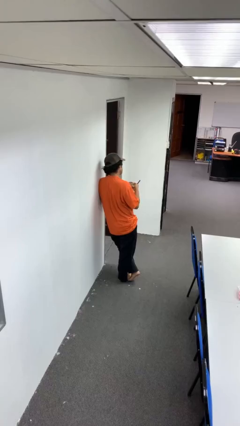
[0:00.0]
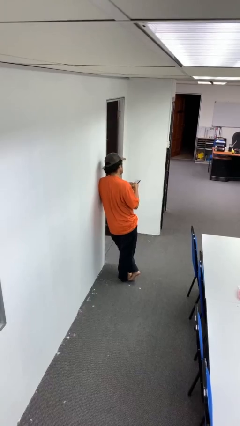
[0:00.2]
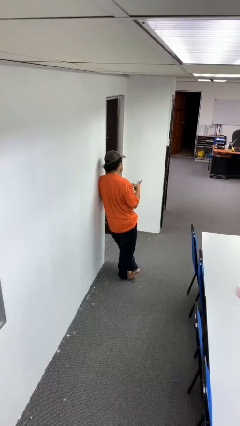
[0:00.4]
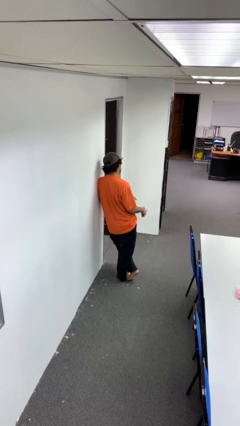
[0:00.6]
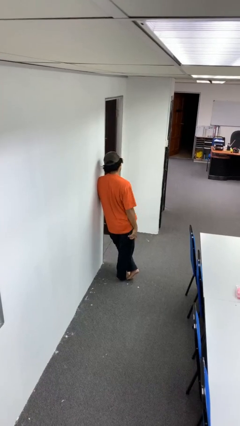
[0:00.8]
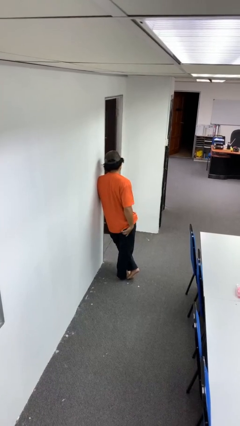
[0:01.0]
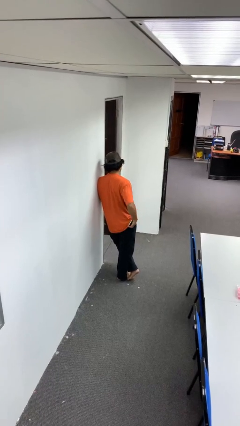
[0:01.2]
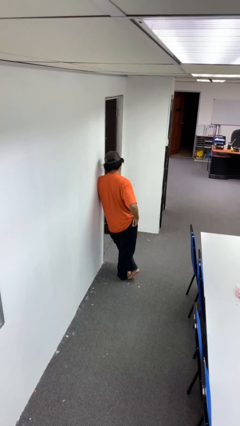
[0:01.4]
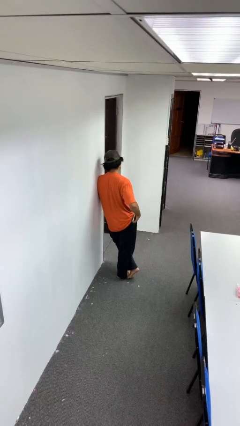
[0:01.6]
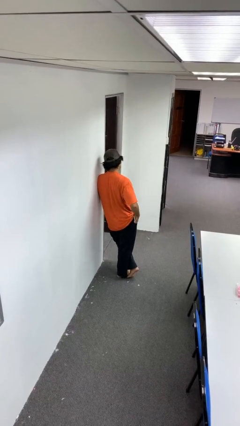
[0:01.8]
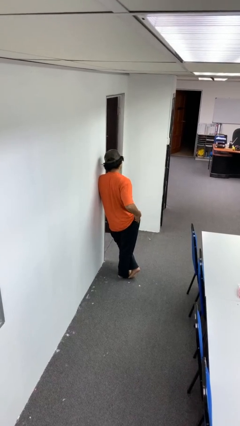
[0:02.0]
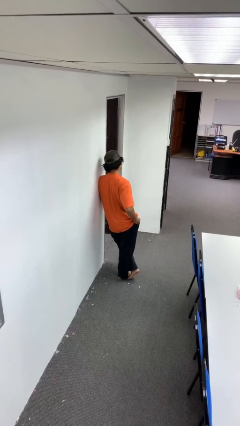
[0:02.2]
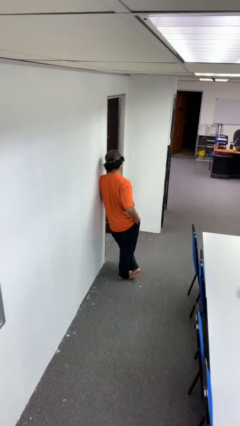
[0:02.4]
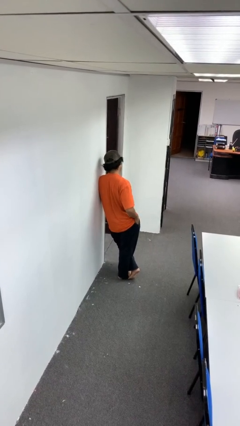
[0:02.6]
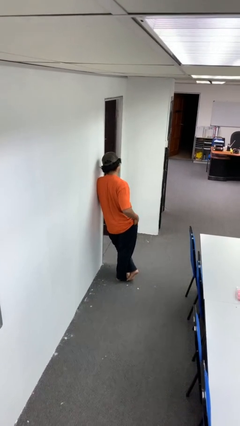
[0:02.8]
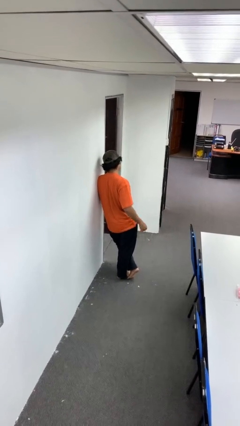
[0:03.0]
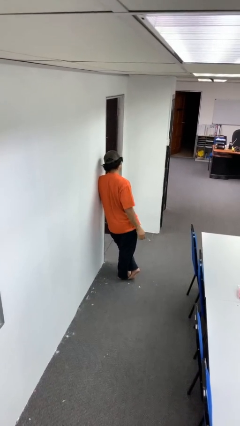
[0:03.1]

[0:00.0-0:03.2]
person puts phone into pocket

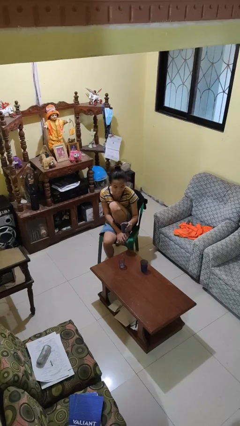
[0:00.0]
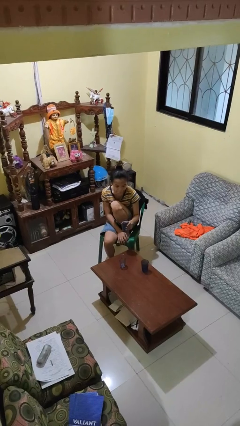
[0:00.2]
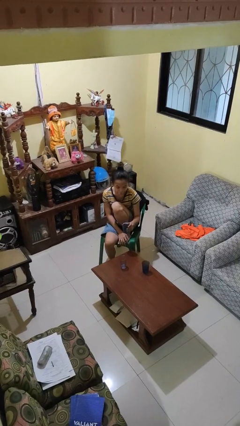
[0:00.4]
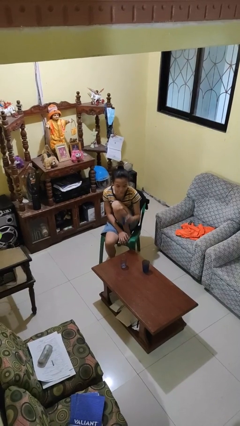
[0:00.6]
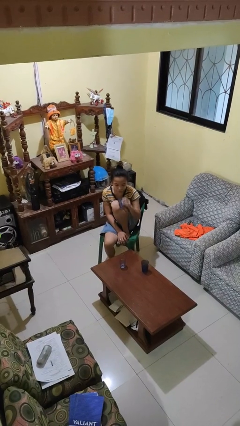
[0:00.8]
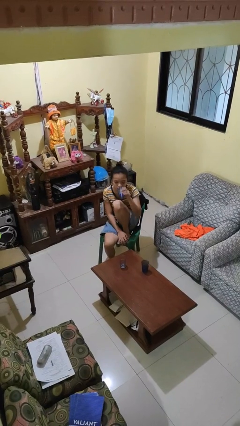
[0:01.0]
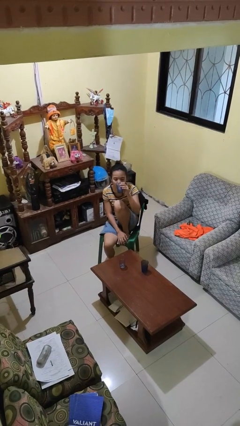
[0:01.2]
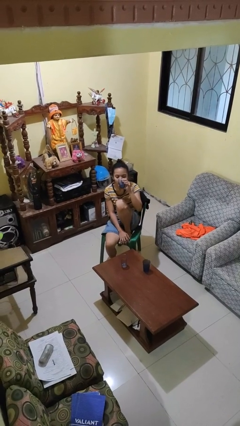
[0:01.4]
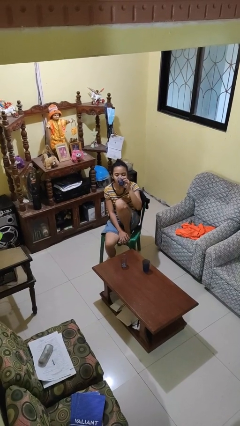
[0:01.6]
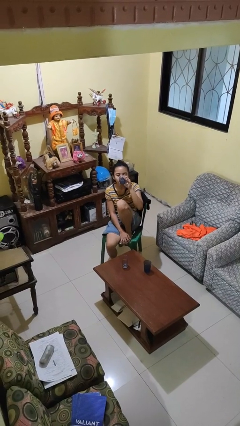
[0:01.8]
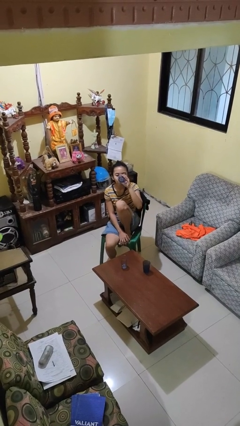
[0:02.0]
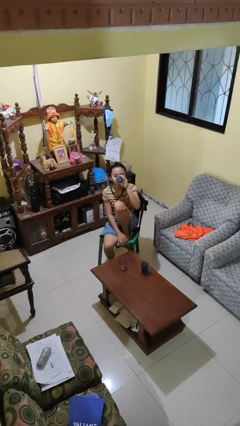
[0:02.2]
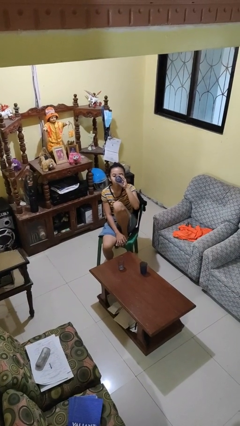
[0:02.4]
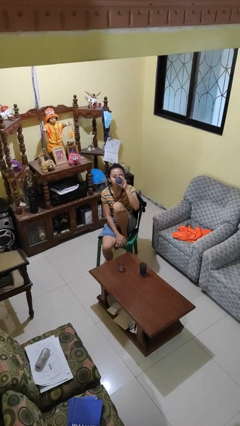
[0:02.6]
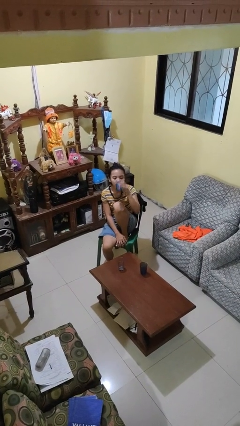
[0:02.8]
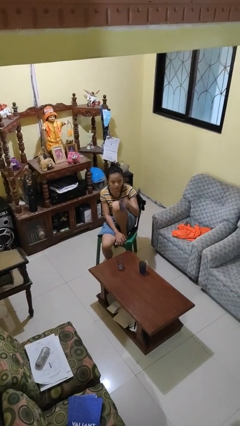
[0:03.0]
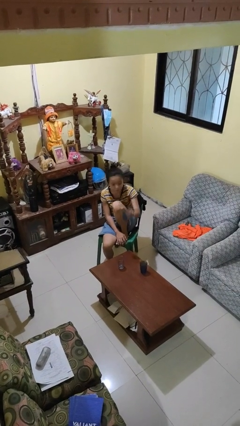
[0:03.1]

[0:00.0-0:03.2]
person drinks from shotglass

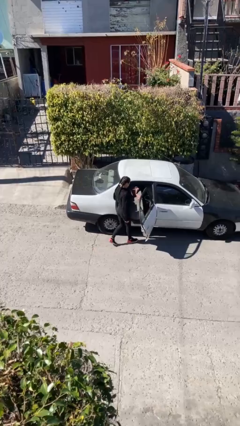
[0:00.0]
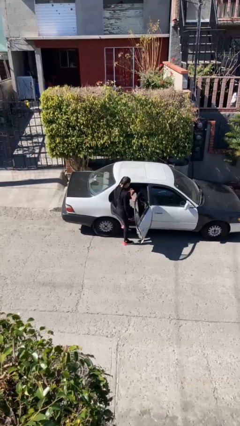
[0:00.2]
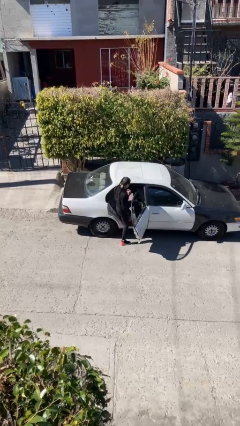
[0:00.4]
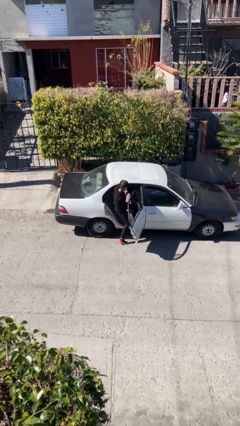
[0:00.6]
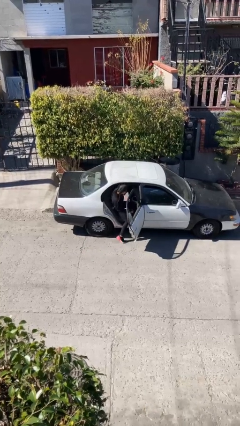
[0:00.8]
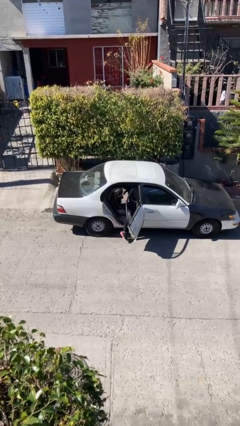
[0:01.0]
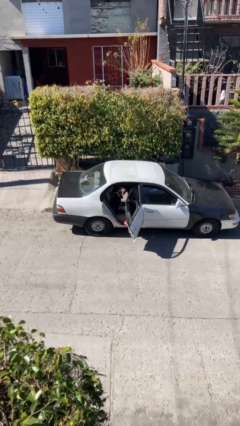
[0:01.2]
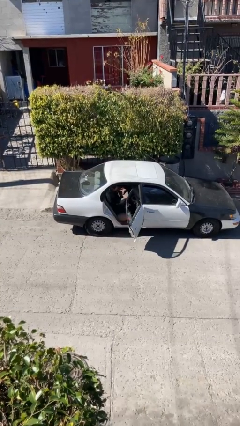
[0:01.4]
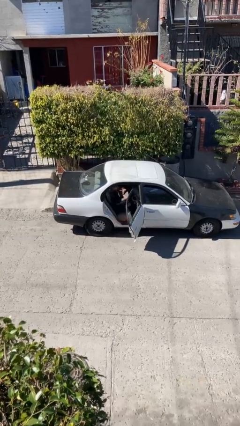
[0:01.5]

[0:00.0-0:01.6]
person enters car

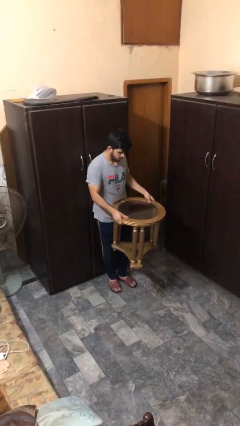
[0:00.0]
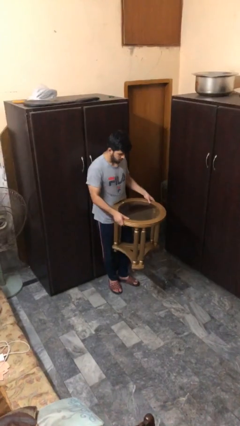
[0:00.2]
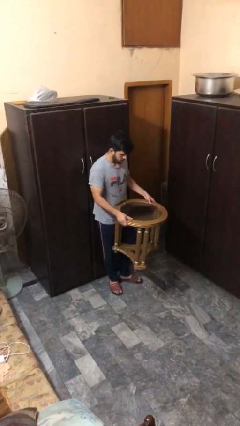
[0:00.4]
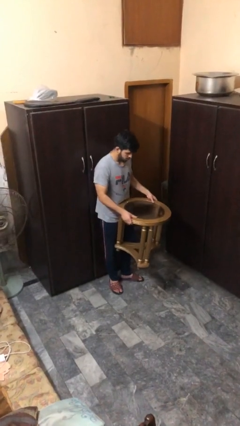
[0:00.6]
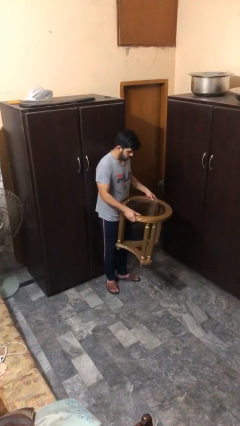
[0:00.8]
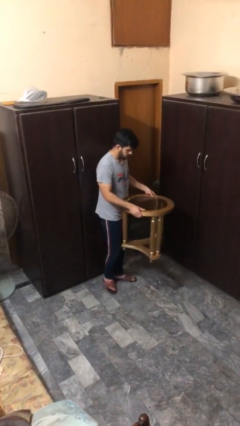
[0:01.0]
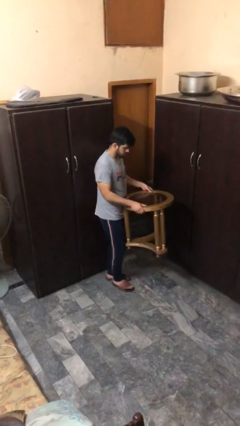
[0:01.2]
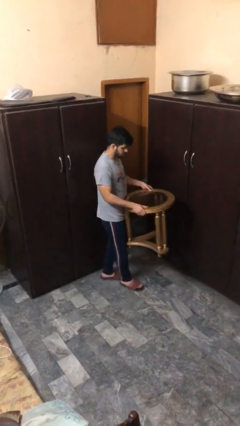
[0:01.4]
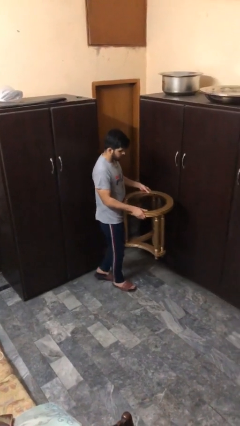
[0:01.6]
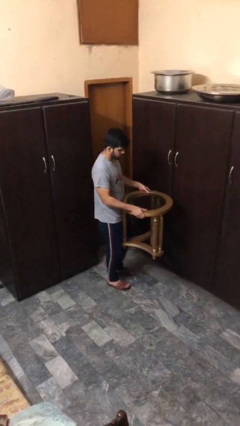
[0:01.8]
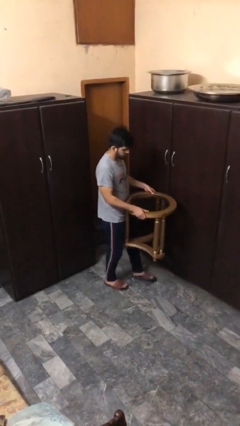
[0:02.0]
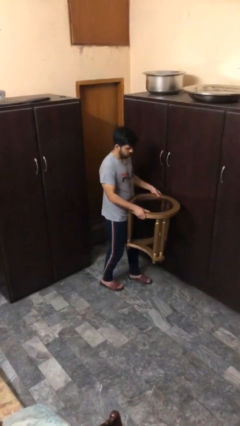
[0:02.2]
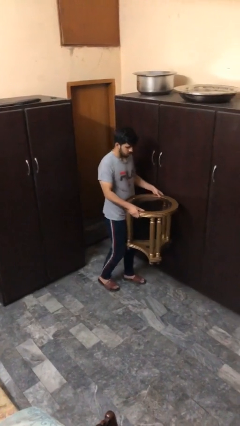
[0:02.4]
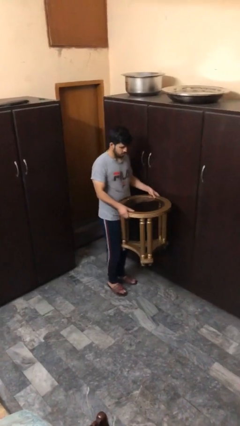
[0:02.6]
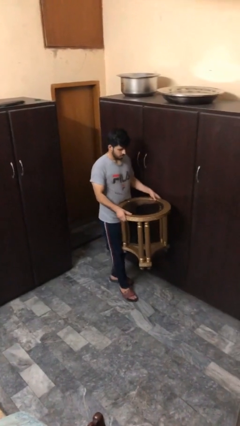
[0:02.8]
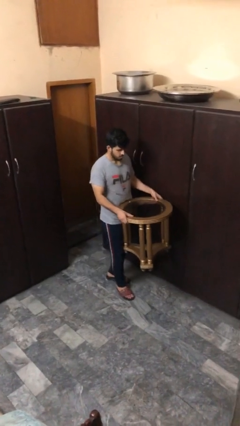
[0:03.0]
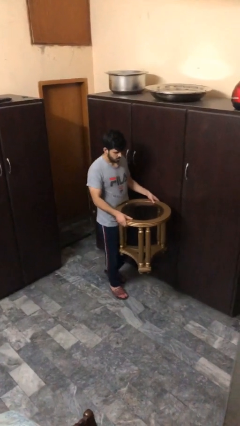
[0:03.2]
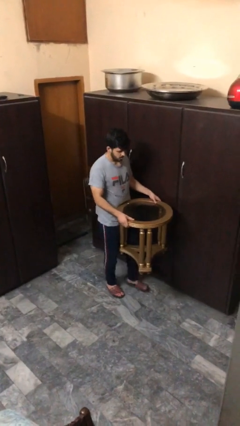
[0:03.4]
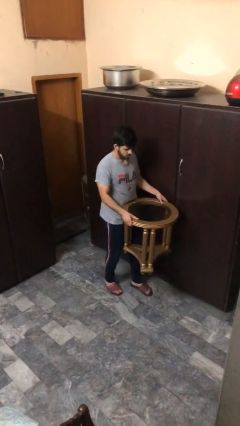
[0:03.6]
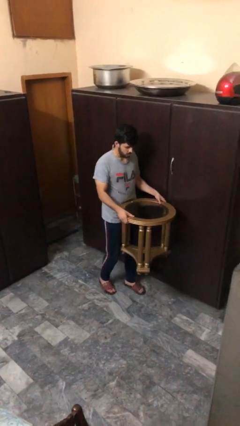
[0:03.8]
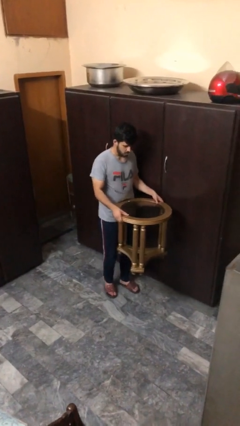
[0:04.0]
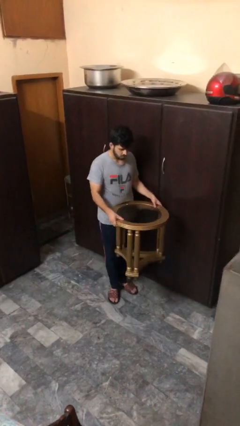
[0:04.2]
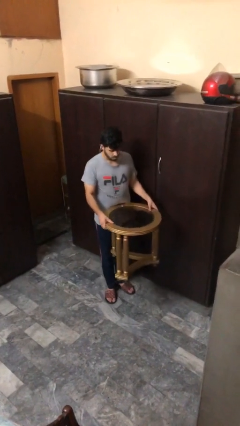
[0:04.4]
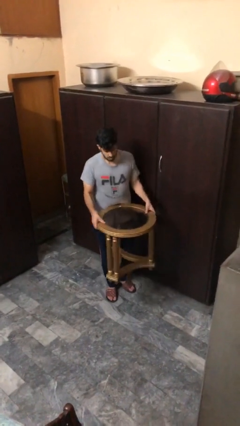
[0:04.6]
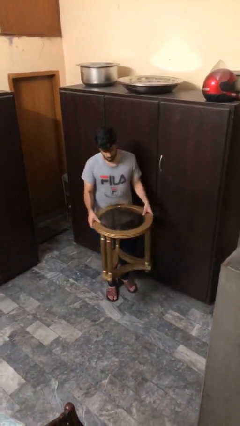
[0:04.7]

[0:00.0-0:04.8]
person carries furniture

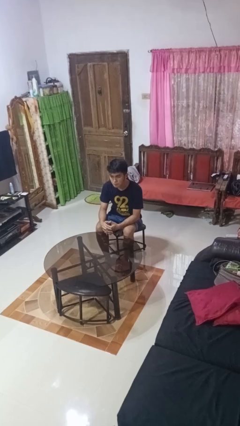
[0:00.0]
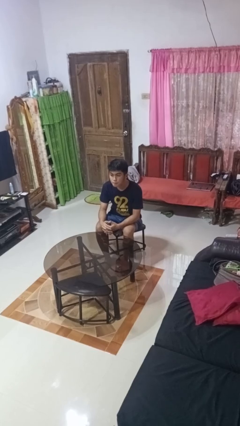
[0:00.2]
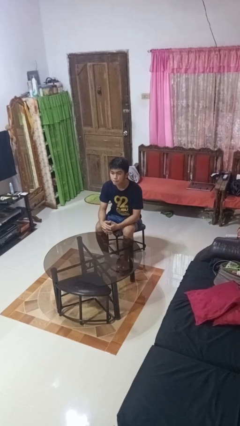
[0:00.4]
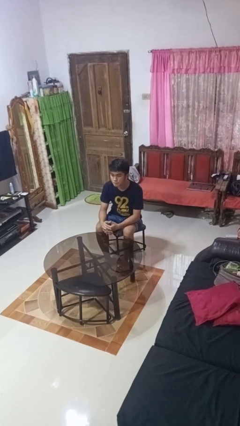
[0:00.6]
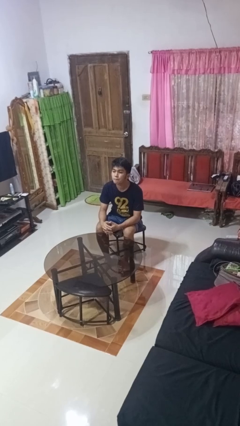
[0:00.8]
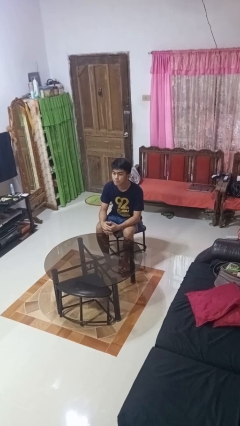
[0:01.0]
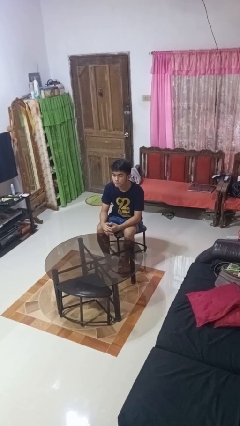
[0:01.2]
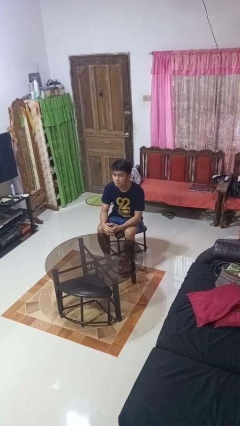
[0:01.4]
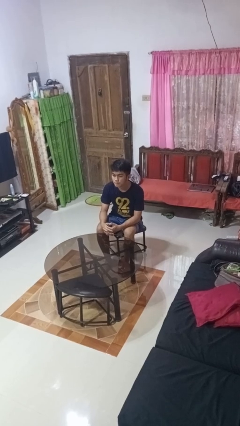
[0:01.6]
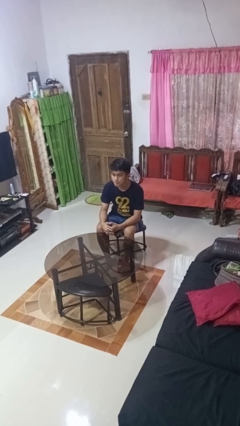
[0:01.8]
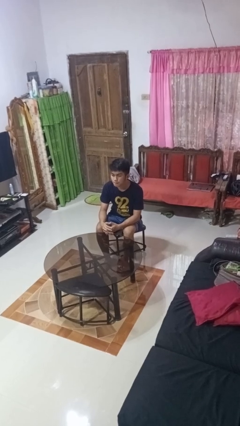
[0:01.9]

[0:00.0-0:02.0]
person nods head

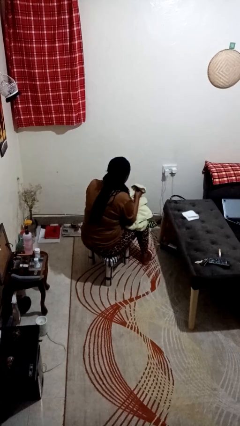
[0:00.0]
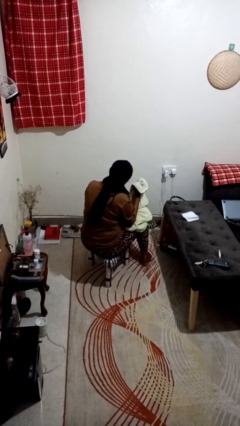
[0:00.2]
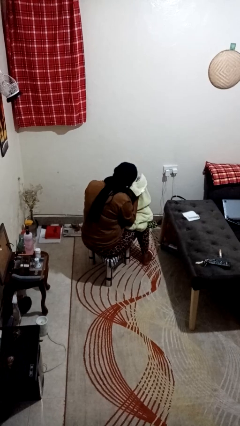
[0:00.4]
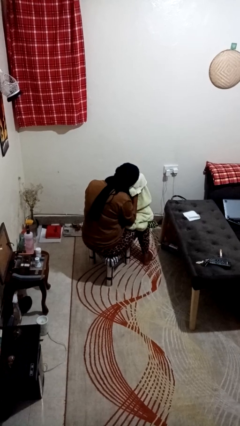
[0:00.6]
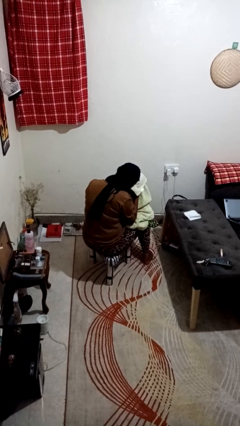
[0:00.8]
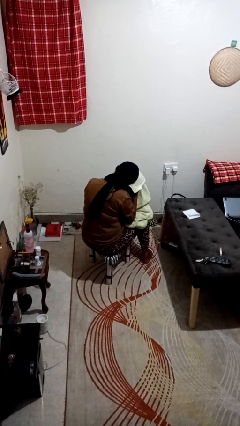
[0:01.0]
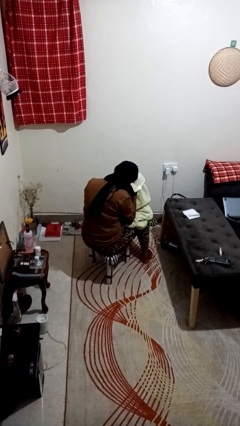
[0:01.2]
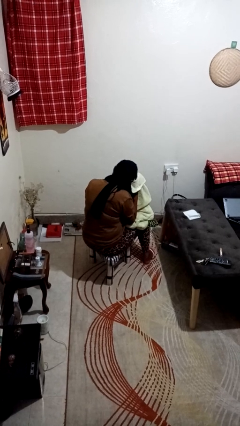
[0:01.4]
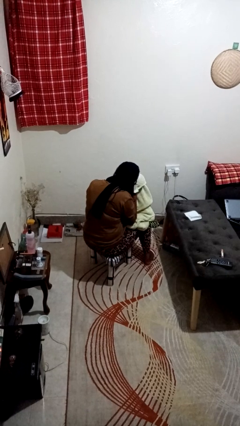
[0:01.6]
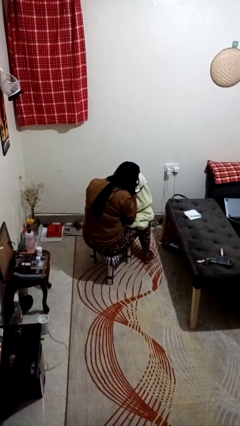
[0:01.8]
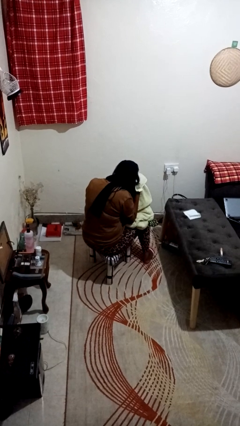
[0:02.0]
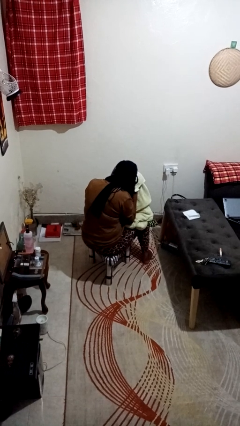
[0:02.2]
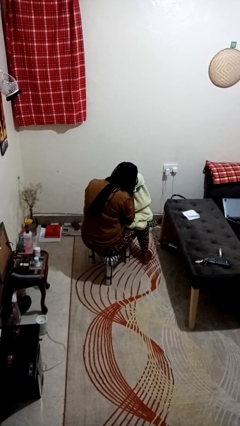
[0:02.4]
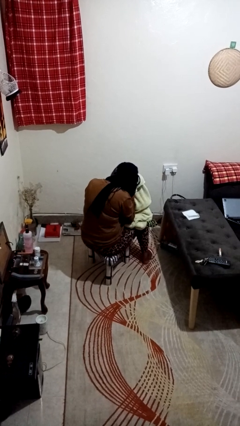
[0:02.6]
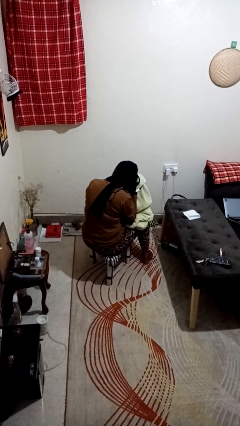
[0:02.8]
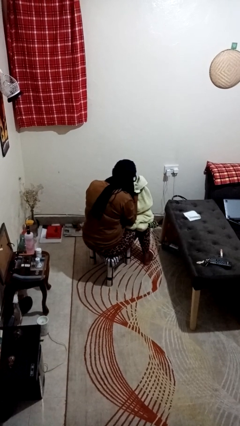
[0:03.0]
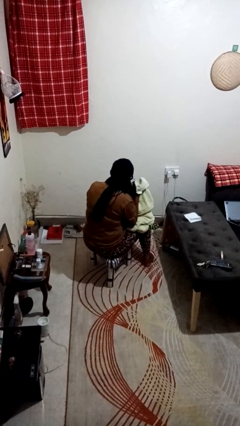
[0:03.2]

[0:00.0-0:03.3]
person dries hair with towel
